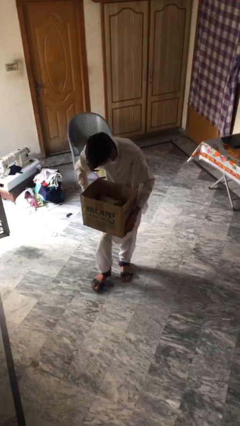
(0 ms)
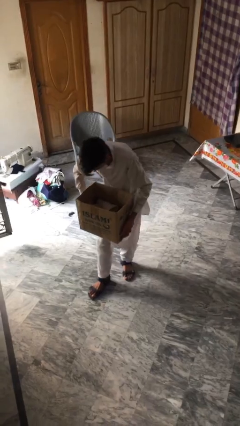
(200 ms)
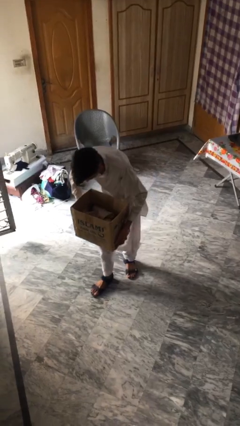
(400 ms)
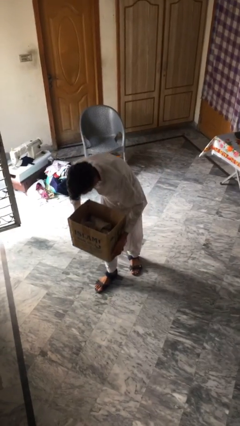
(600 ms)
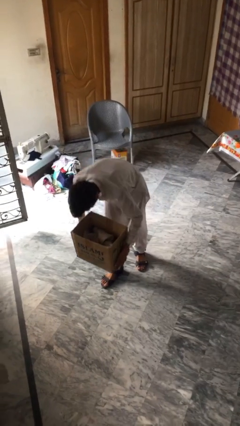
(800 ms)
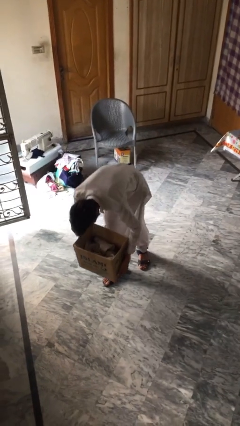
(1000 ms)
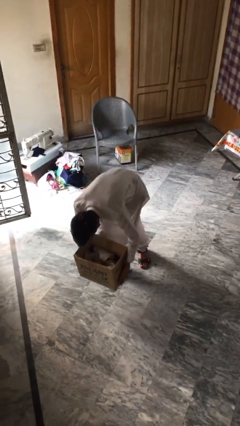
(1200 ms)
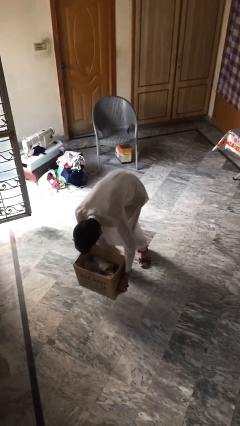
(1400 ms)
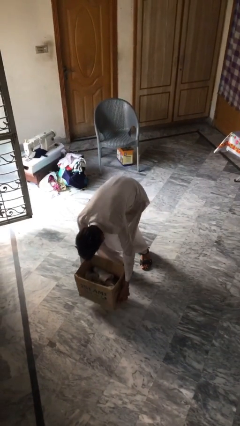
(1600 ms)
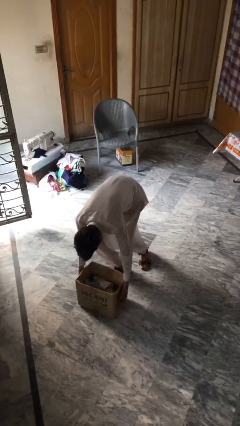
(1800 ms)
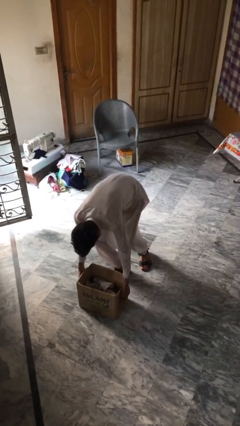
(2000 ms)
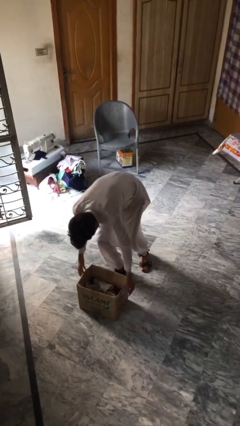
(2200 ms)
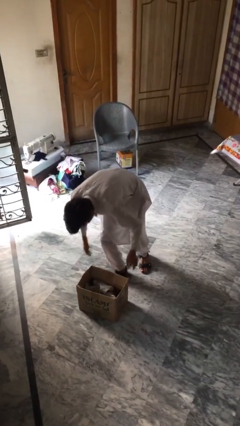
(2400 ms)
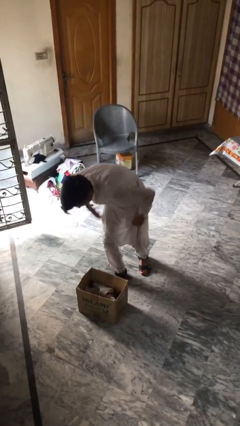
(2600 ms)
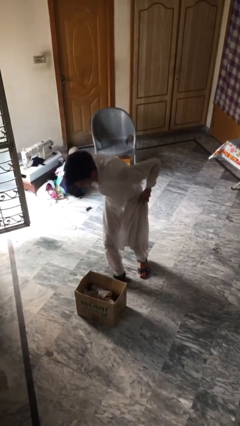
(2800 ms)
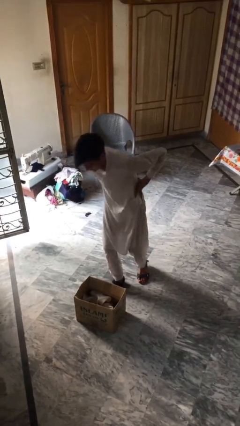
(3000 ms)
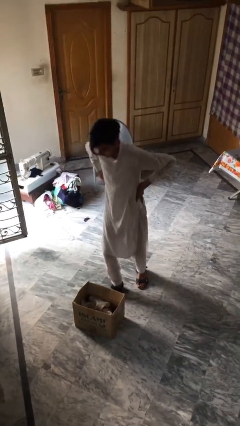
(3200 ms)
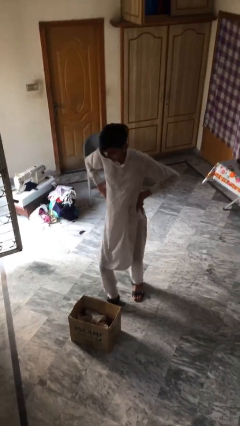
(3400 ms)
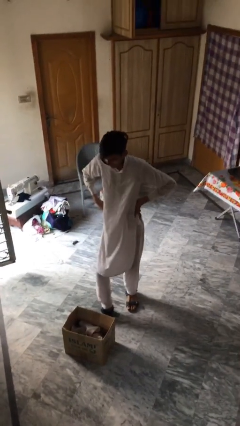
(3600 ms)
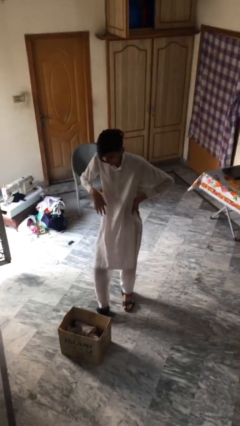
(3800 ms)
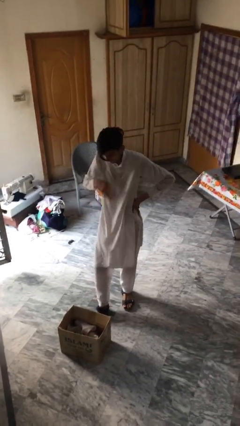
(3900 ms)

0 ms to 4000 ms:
person puts down object on floor

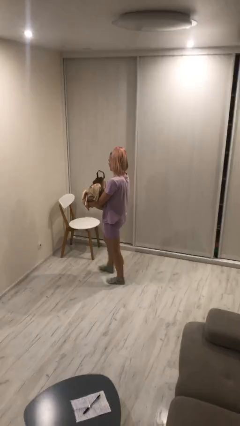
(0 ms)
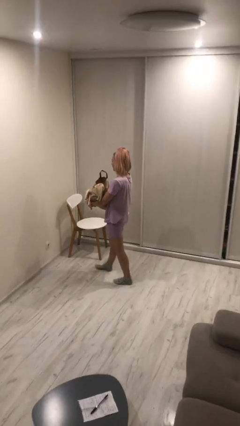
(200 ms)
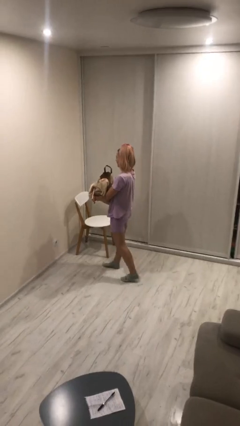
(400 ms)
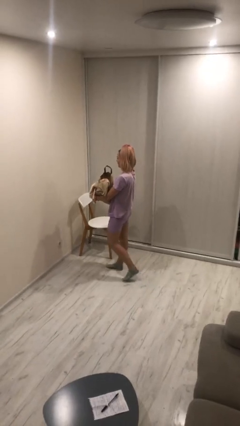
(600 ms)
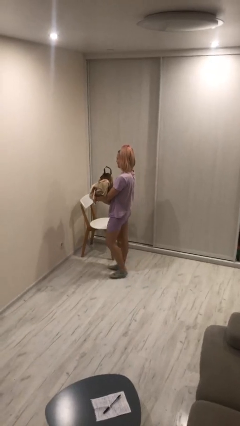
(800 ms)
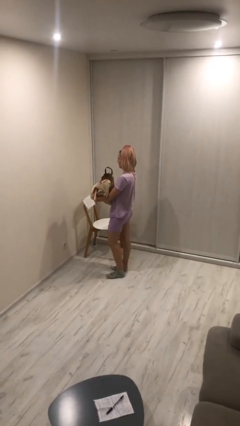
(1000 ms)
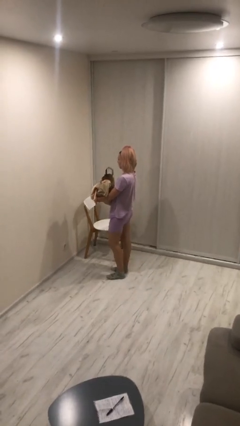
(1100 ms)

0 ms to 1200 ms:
person carries laundry basket

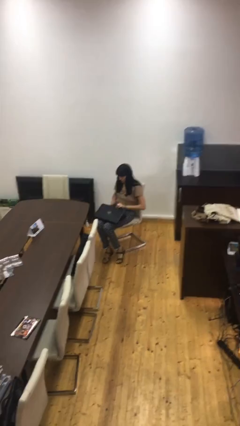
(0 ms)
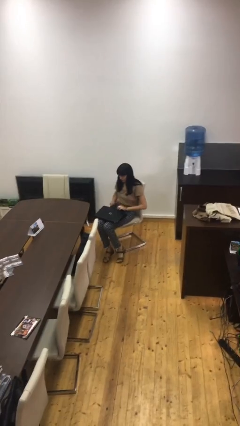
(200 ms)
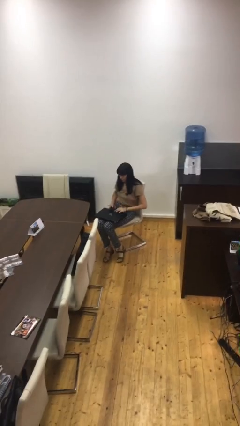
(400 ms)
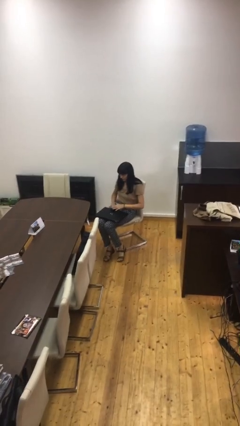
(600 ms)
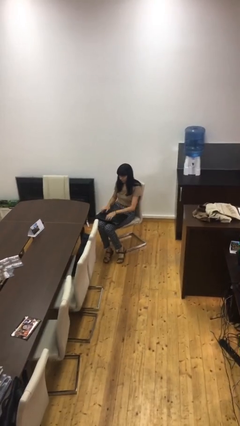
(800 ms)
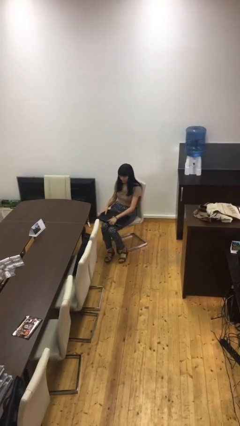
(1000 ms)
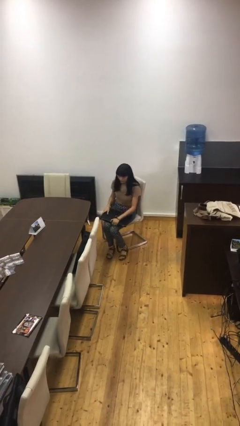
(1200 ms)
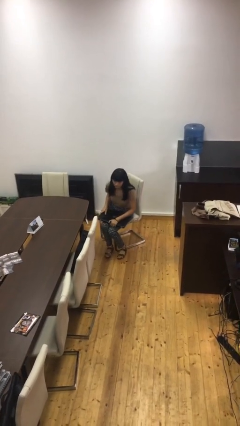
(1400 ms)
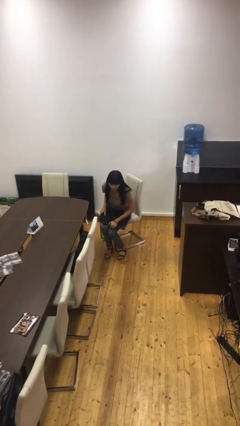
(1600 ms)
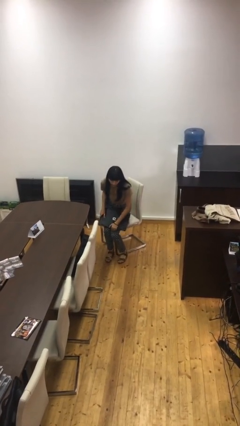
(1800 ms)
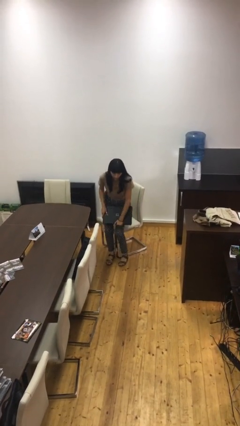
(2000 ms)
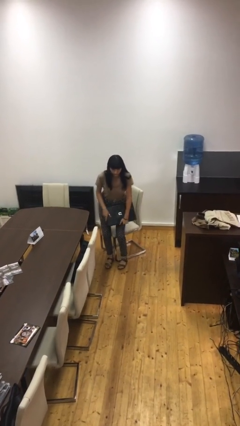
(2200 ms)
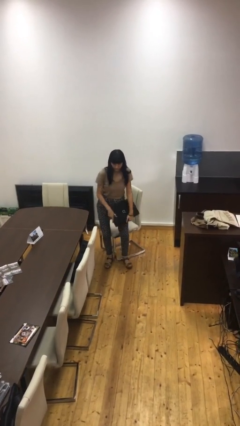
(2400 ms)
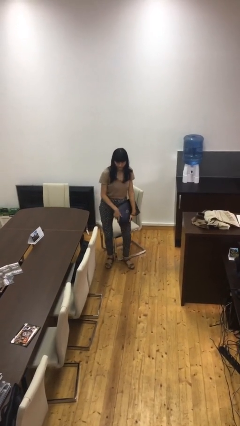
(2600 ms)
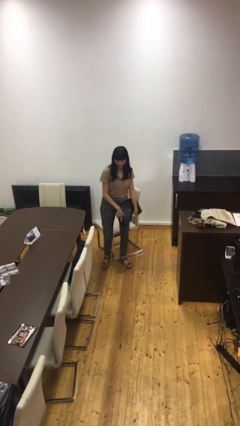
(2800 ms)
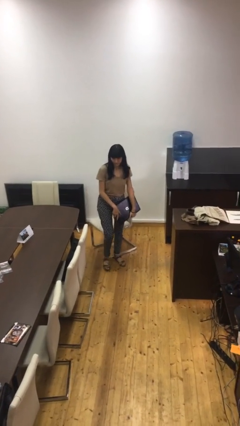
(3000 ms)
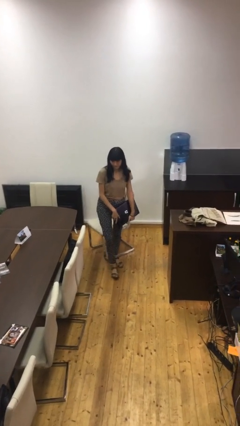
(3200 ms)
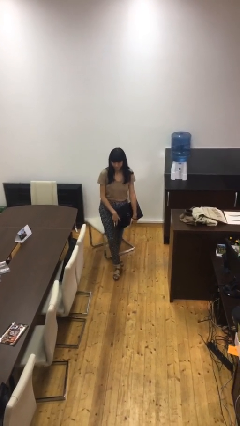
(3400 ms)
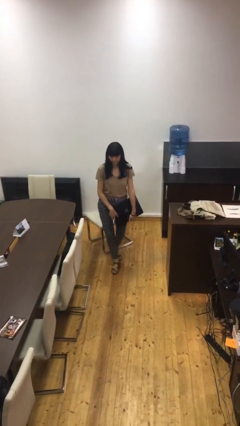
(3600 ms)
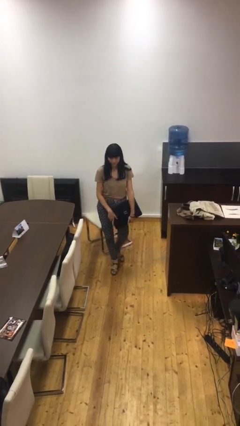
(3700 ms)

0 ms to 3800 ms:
person stands up

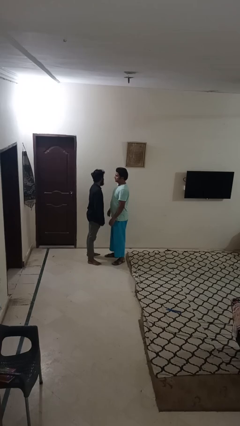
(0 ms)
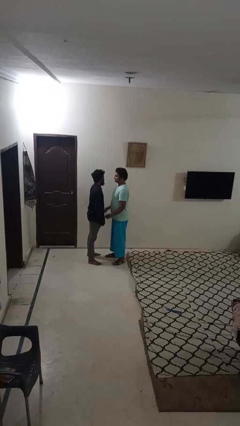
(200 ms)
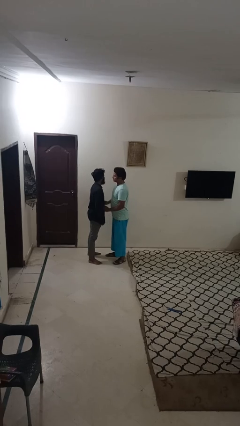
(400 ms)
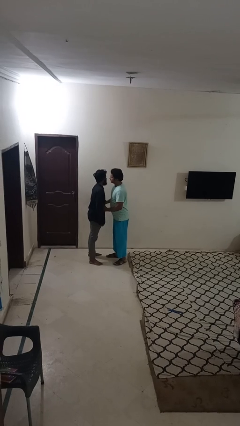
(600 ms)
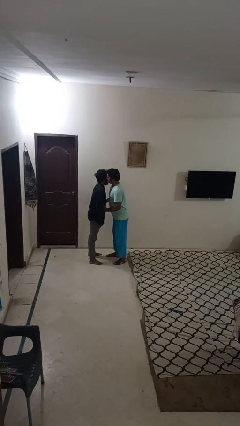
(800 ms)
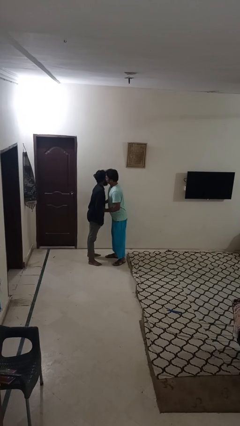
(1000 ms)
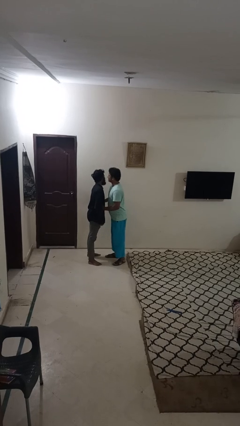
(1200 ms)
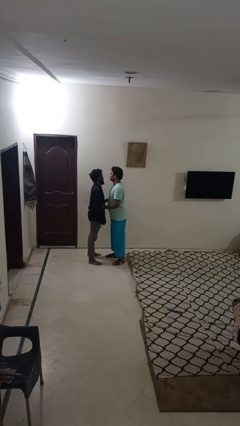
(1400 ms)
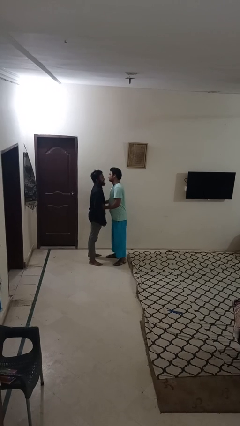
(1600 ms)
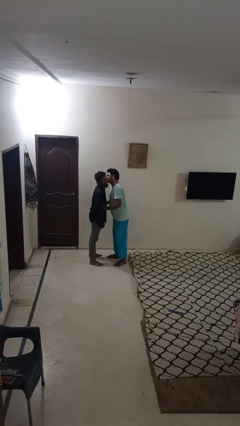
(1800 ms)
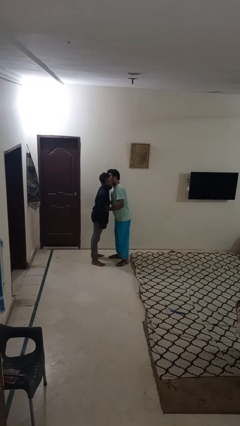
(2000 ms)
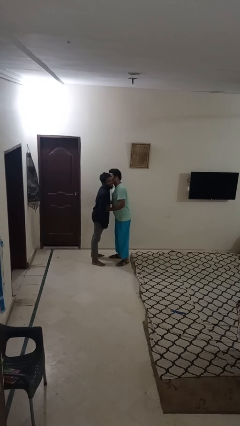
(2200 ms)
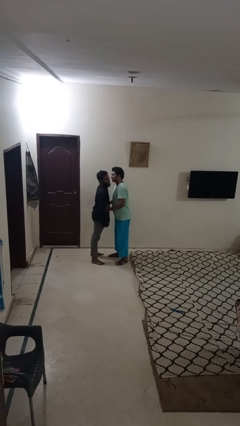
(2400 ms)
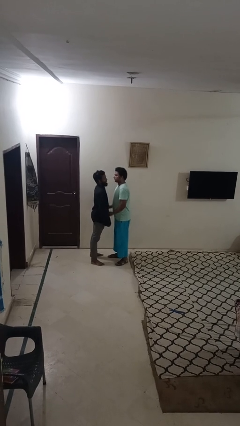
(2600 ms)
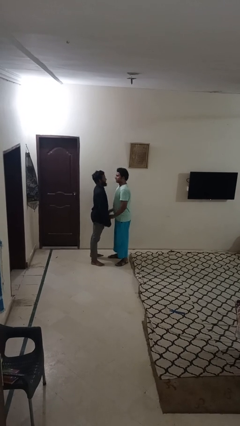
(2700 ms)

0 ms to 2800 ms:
person kisses cheek of person

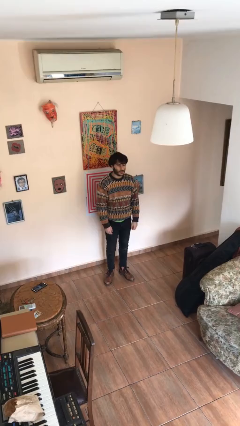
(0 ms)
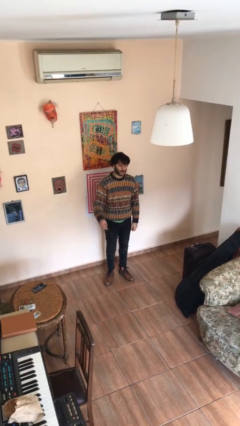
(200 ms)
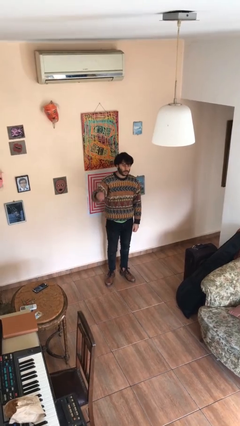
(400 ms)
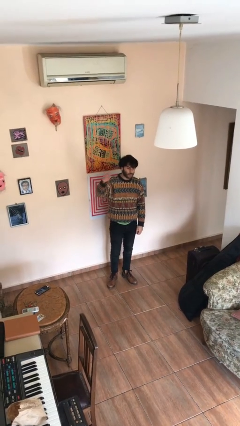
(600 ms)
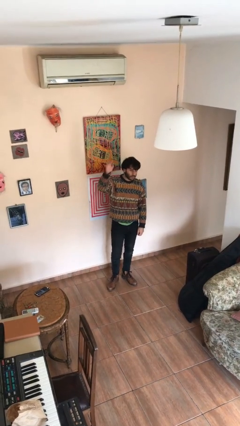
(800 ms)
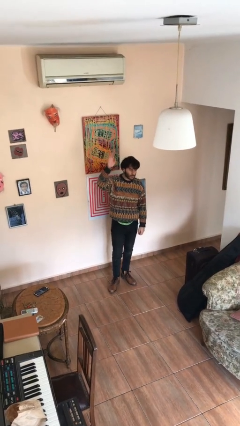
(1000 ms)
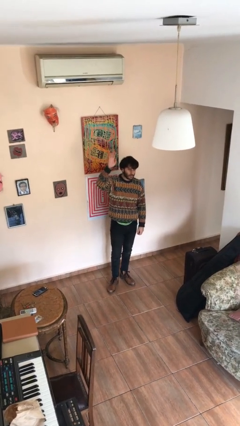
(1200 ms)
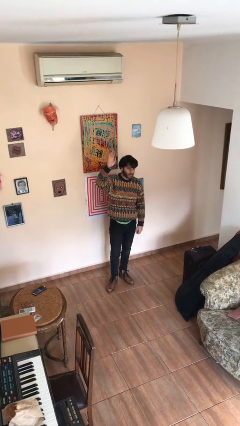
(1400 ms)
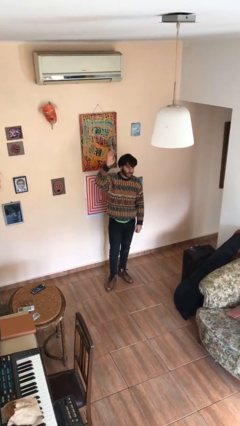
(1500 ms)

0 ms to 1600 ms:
person gestures raise hand

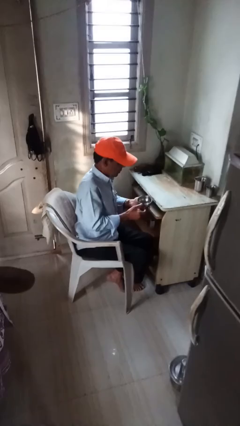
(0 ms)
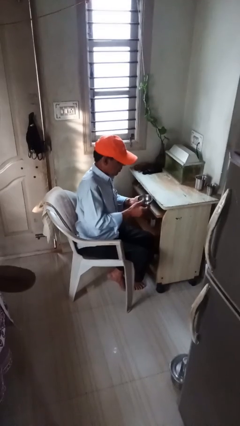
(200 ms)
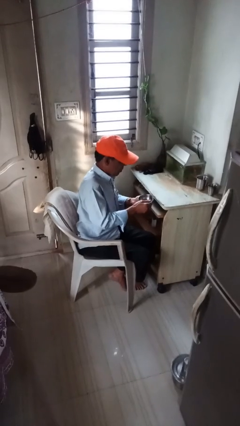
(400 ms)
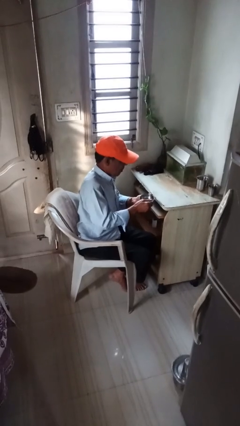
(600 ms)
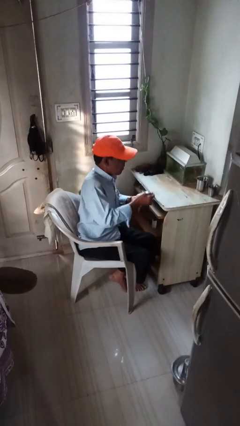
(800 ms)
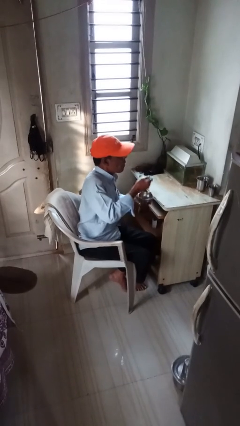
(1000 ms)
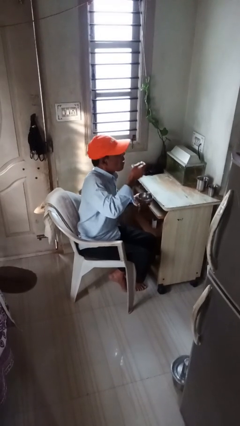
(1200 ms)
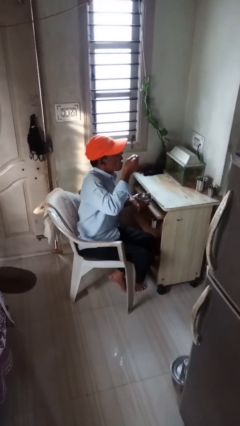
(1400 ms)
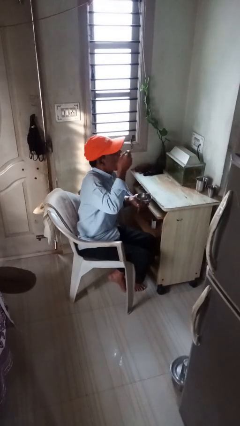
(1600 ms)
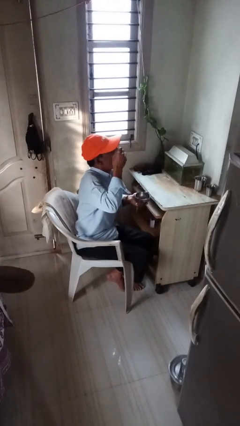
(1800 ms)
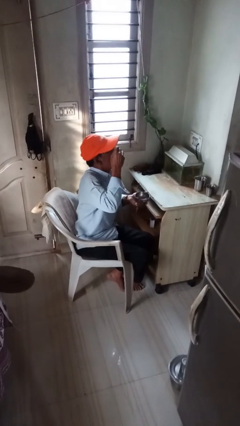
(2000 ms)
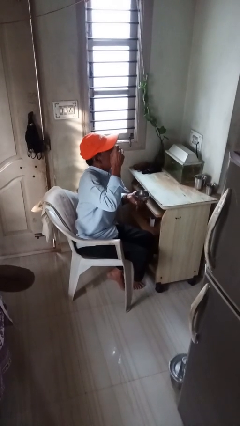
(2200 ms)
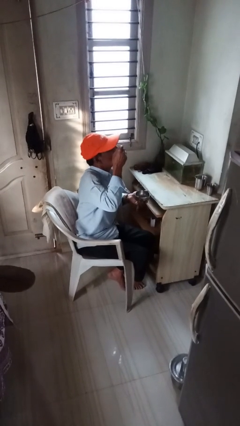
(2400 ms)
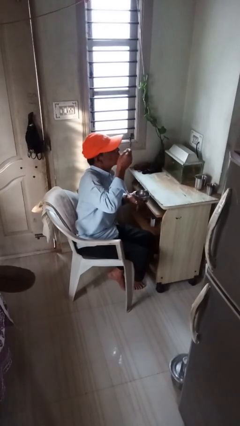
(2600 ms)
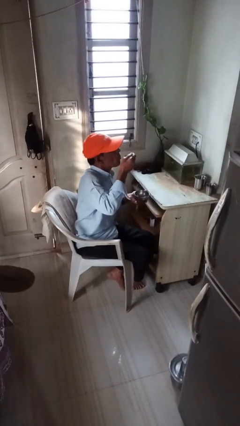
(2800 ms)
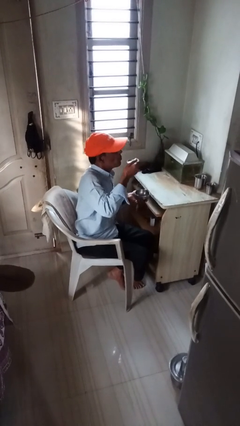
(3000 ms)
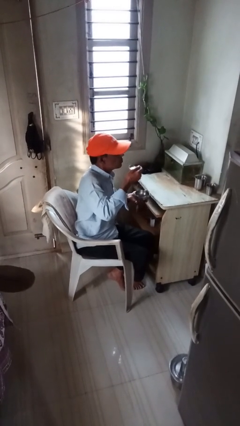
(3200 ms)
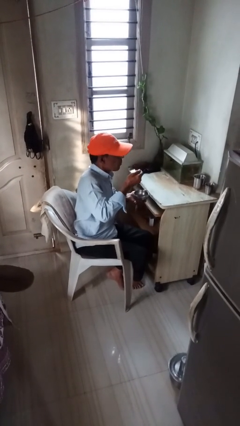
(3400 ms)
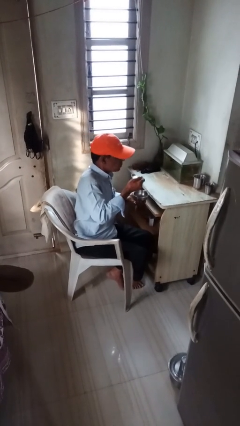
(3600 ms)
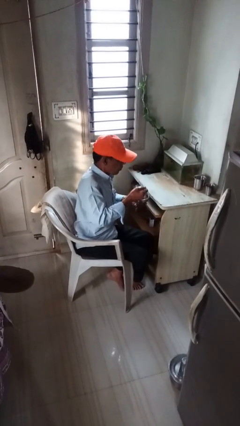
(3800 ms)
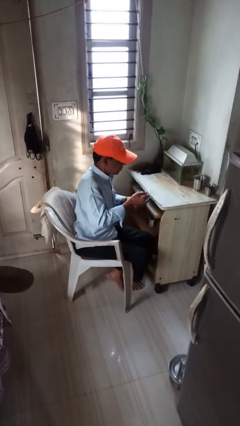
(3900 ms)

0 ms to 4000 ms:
person eats with utensil

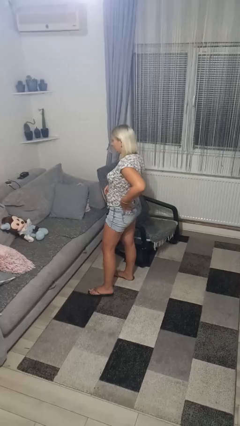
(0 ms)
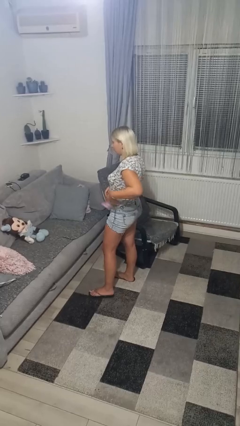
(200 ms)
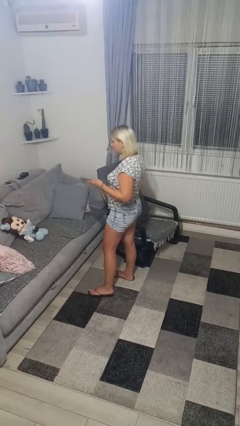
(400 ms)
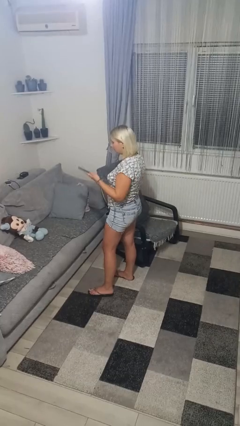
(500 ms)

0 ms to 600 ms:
person takes phone from pocket
